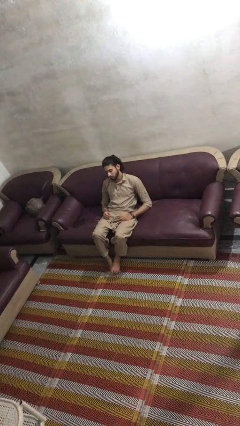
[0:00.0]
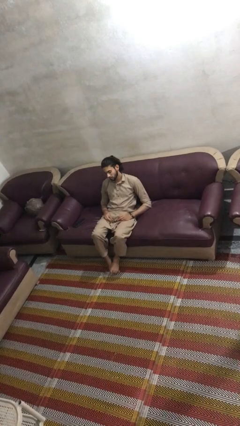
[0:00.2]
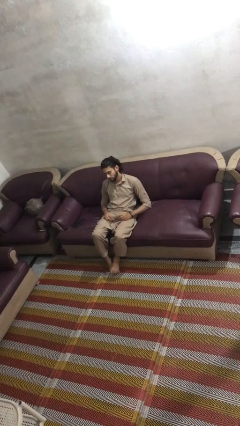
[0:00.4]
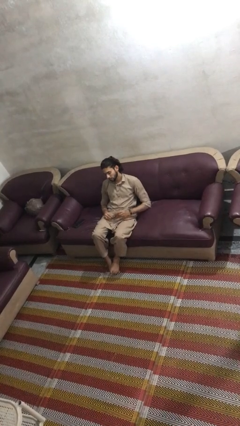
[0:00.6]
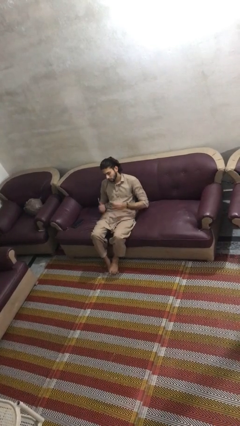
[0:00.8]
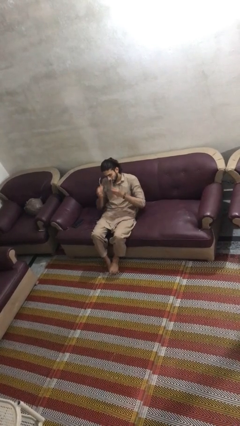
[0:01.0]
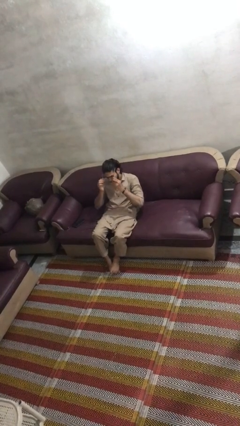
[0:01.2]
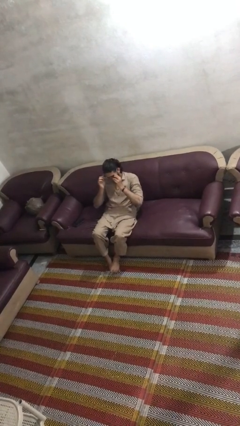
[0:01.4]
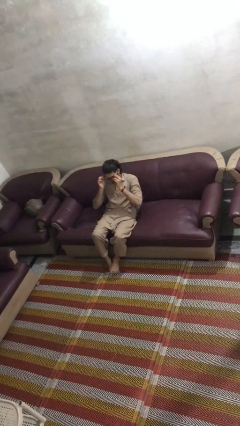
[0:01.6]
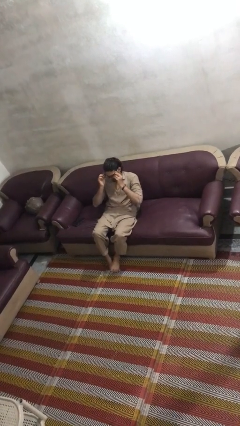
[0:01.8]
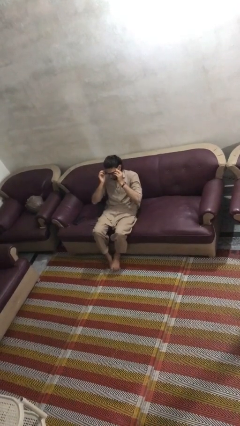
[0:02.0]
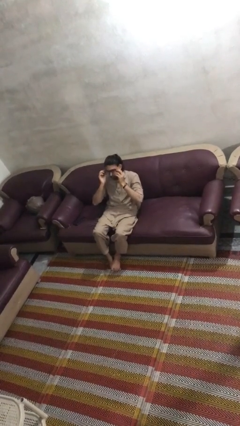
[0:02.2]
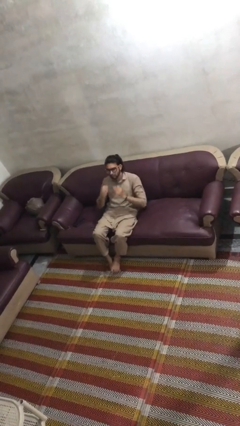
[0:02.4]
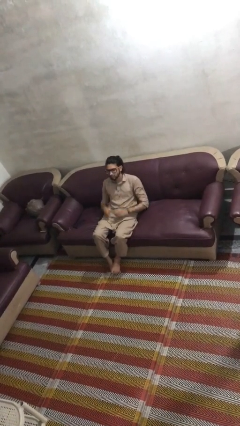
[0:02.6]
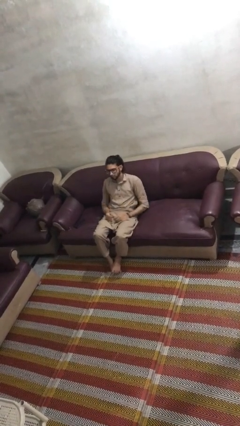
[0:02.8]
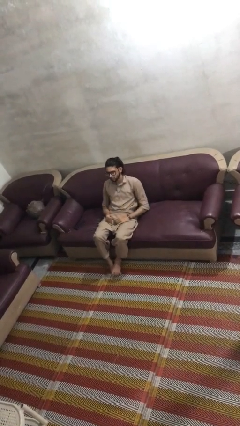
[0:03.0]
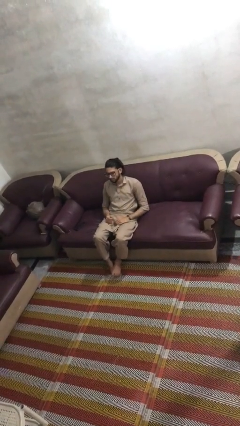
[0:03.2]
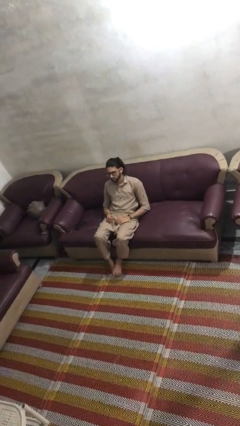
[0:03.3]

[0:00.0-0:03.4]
person puts on glasses

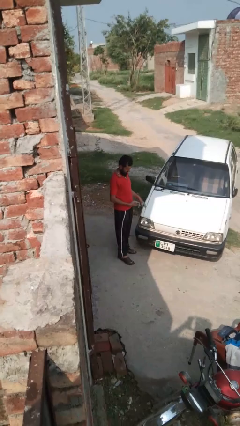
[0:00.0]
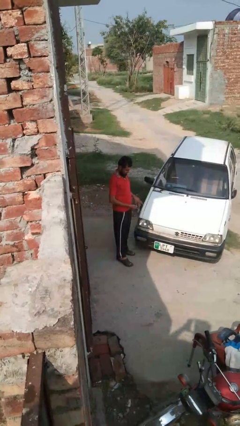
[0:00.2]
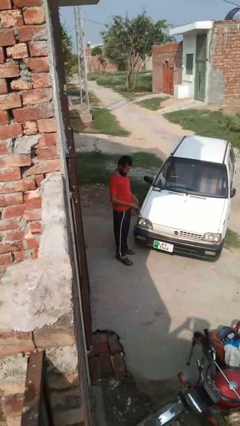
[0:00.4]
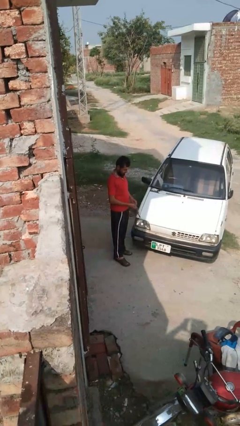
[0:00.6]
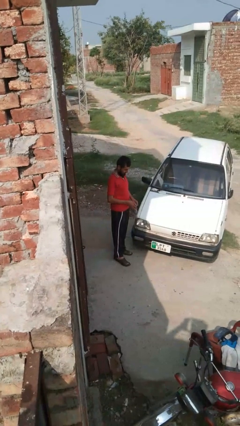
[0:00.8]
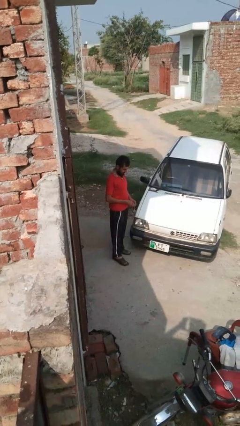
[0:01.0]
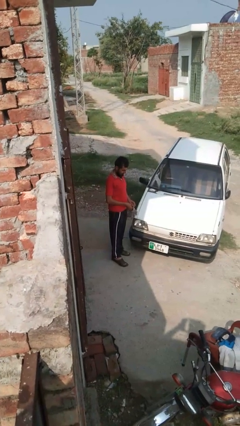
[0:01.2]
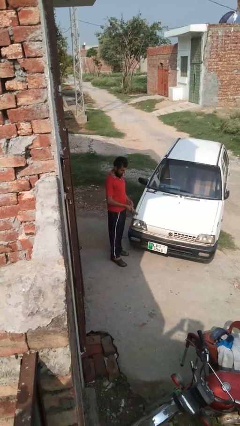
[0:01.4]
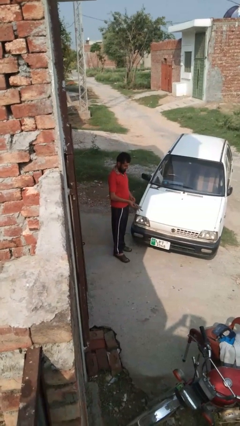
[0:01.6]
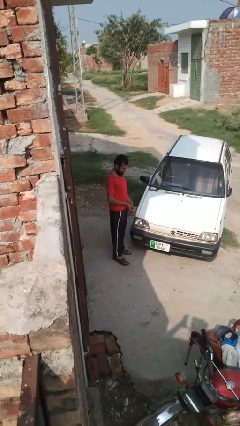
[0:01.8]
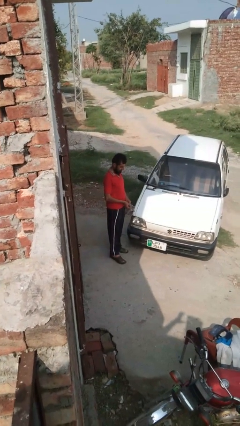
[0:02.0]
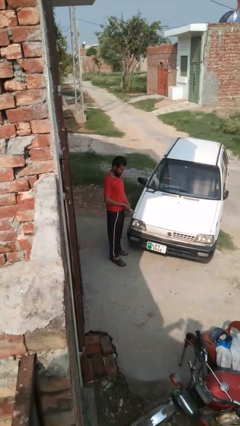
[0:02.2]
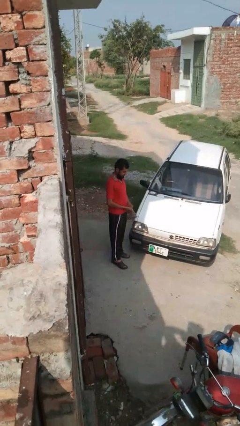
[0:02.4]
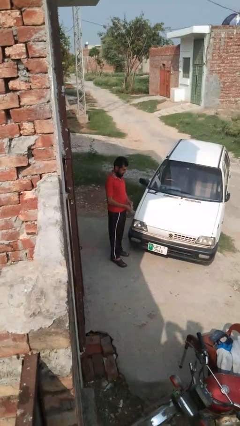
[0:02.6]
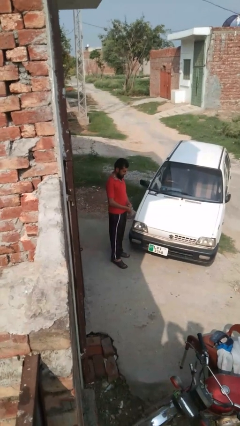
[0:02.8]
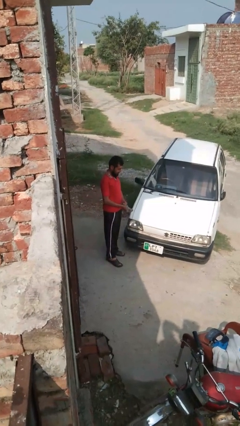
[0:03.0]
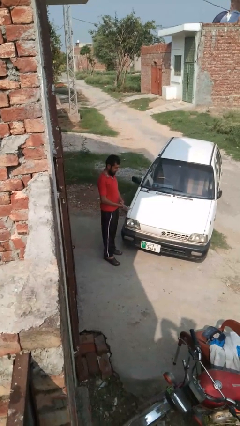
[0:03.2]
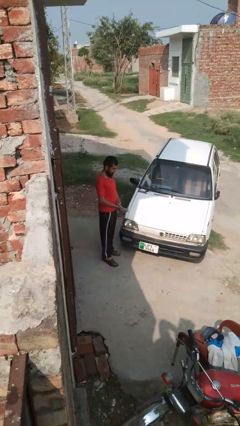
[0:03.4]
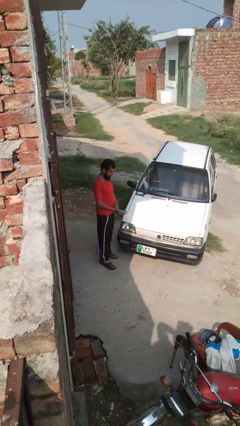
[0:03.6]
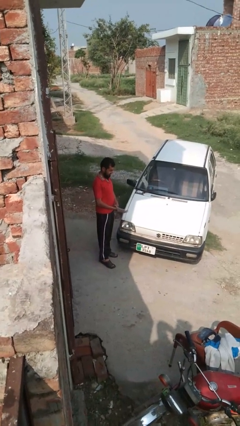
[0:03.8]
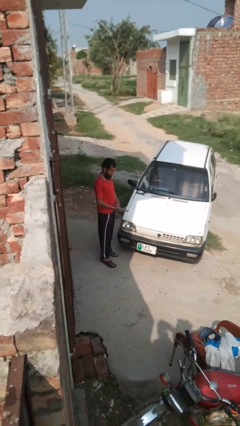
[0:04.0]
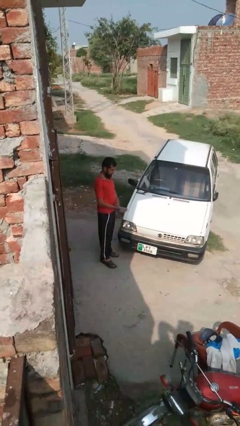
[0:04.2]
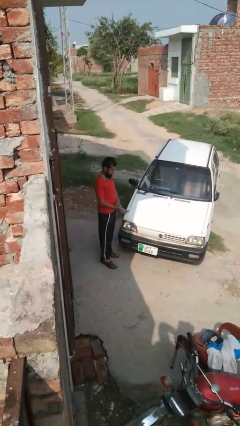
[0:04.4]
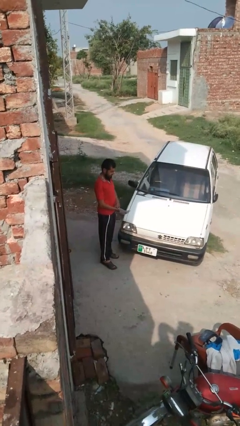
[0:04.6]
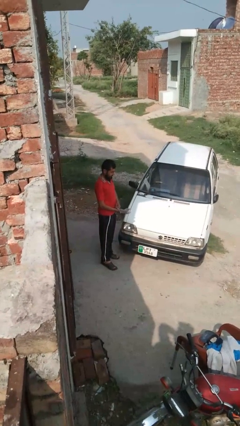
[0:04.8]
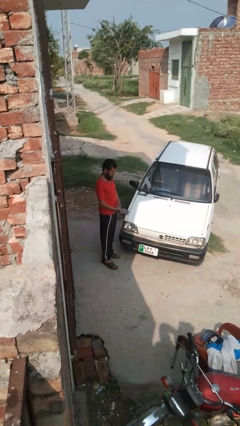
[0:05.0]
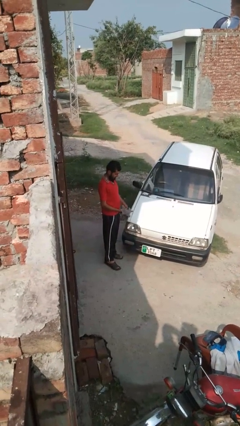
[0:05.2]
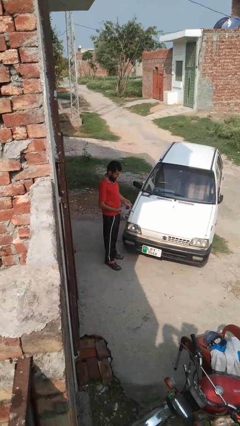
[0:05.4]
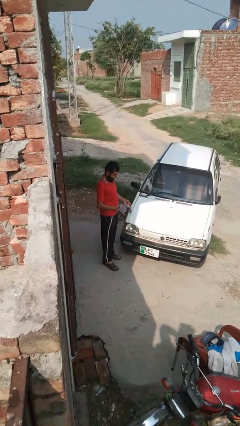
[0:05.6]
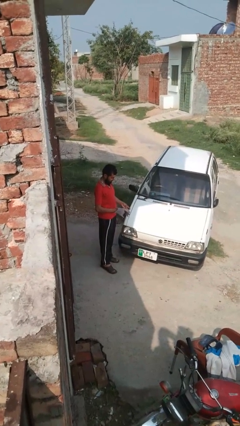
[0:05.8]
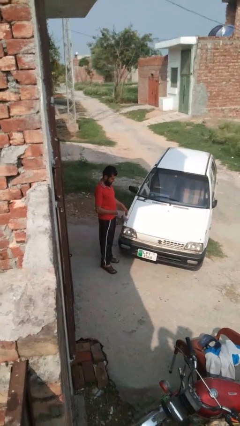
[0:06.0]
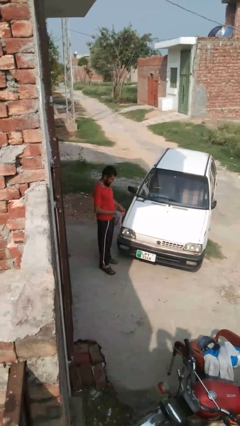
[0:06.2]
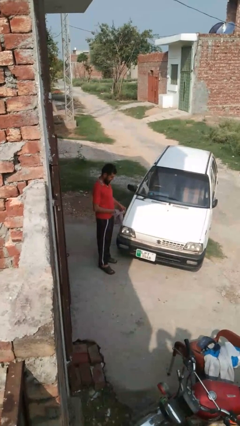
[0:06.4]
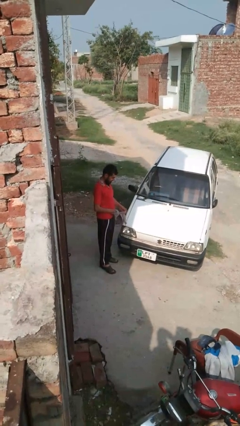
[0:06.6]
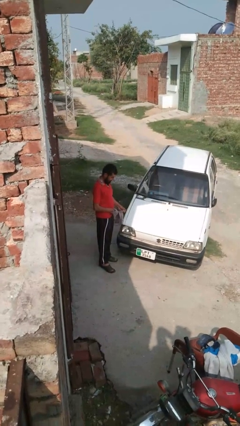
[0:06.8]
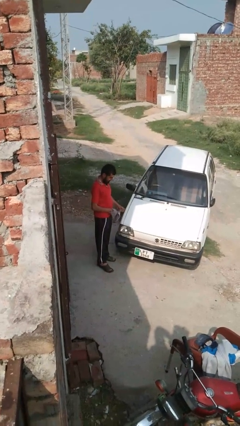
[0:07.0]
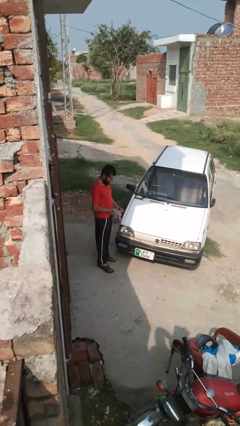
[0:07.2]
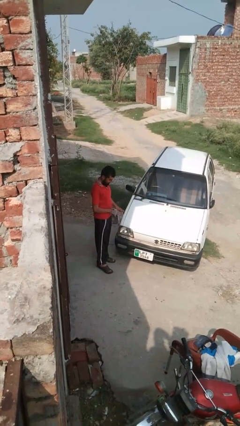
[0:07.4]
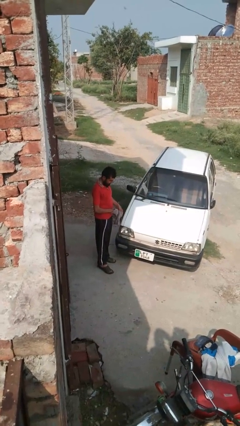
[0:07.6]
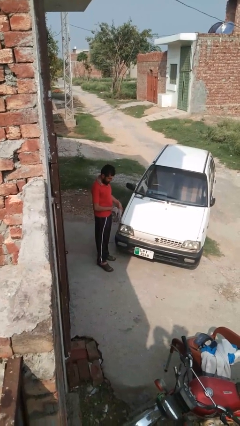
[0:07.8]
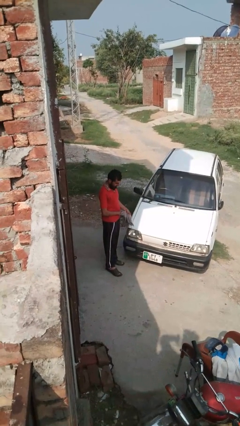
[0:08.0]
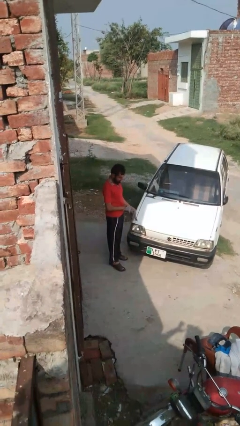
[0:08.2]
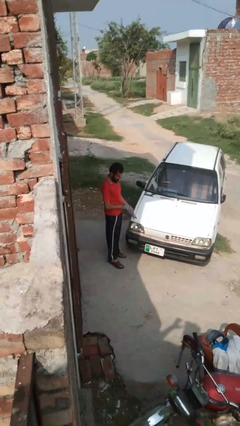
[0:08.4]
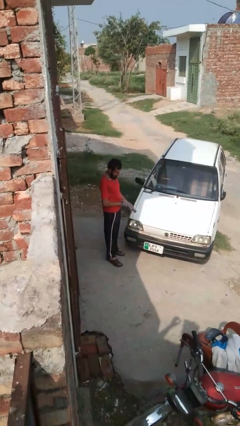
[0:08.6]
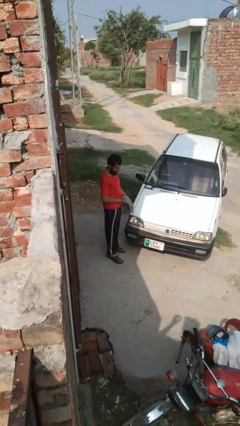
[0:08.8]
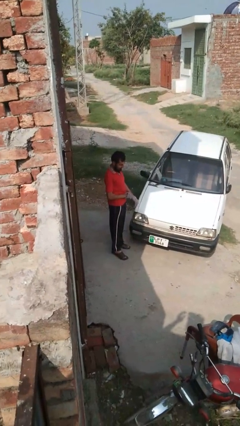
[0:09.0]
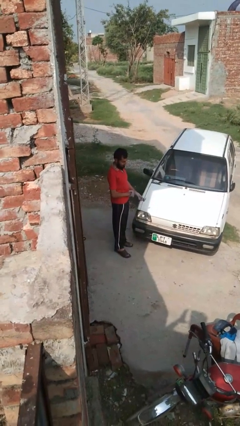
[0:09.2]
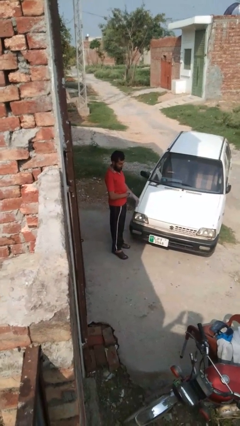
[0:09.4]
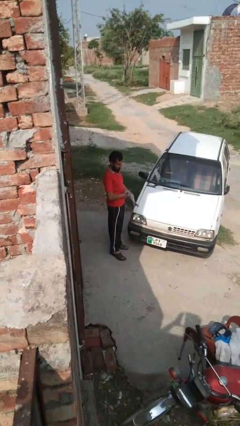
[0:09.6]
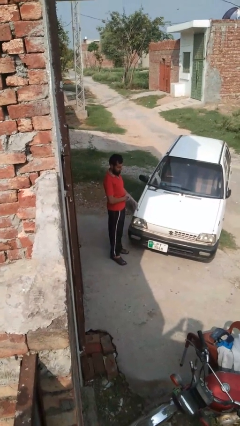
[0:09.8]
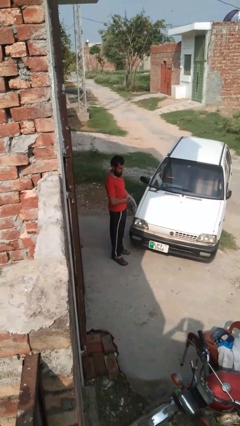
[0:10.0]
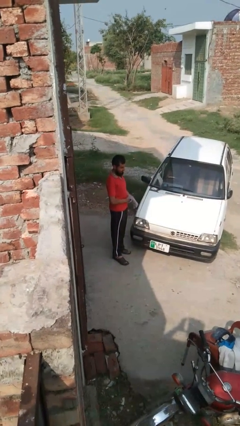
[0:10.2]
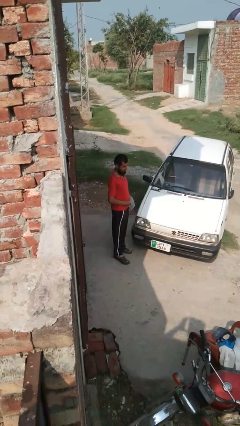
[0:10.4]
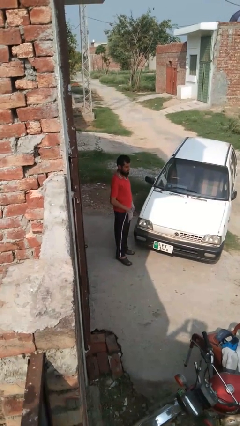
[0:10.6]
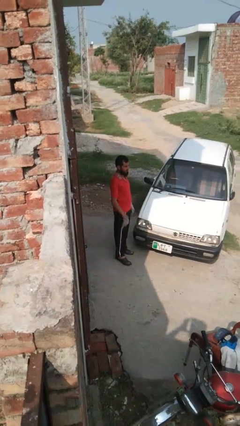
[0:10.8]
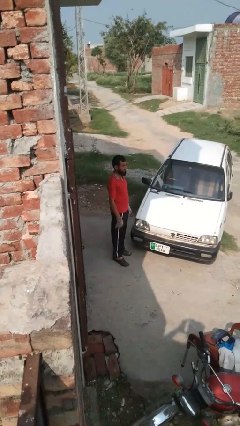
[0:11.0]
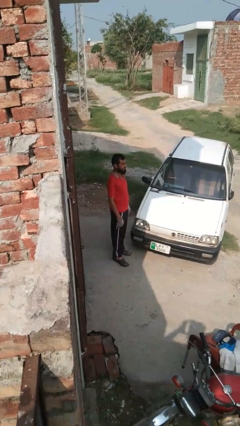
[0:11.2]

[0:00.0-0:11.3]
person puts on gloves

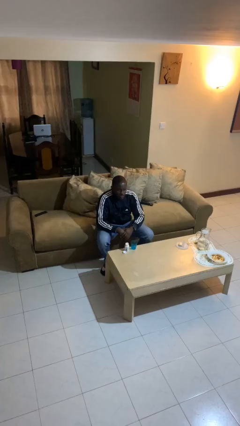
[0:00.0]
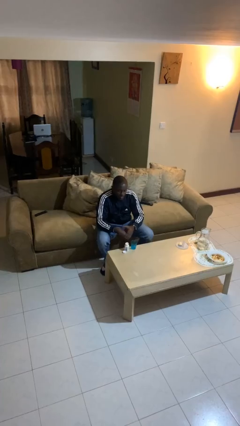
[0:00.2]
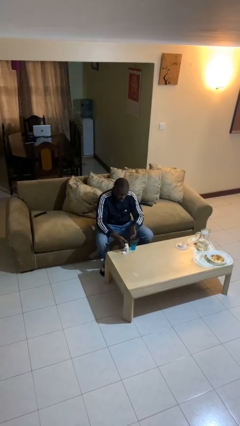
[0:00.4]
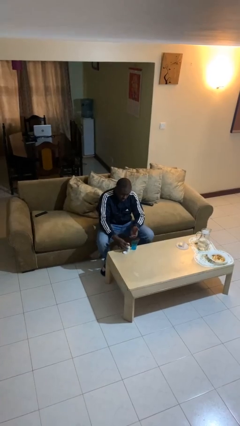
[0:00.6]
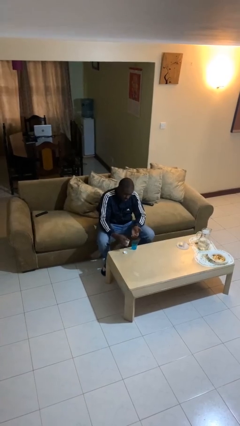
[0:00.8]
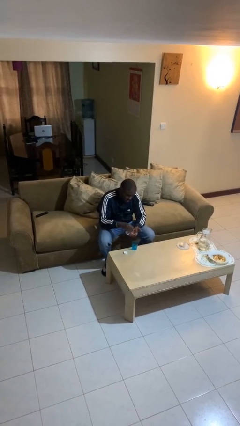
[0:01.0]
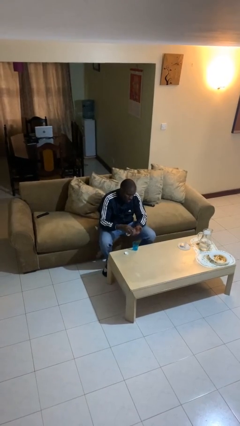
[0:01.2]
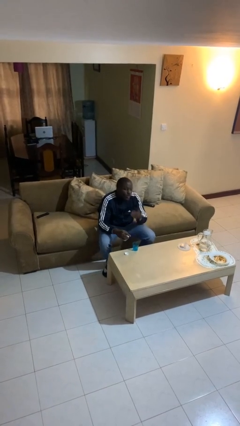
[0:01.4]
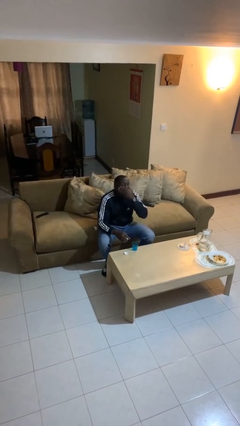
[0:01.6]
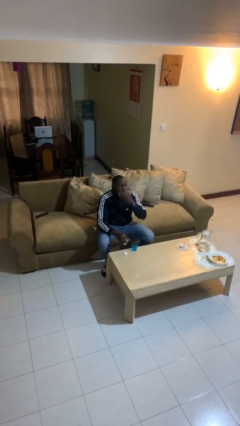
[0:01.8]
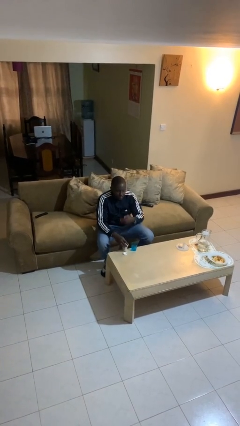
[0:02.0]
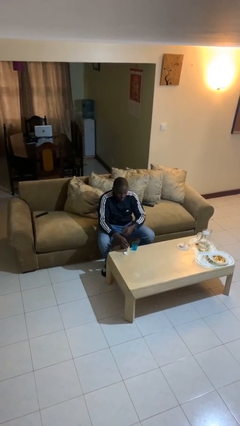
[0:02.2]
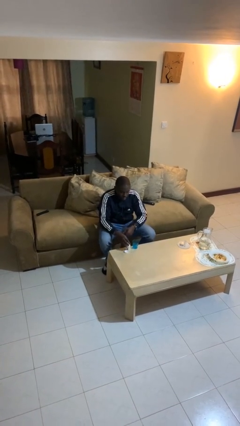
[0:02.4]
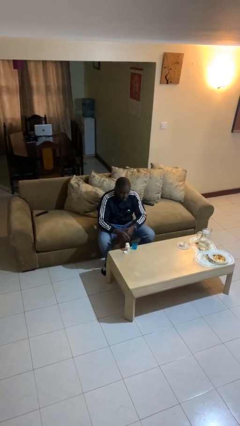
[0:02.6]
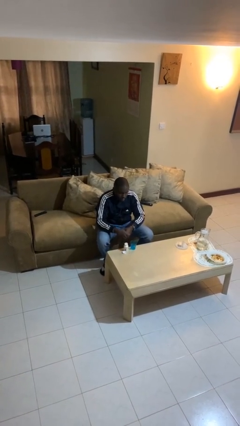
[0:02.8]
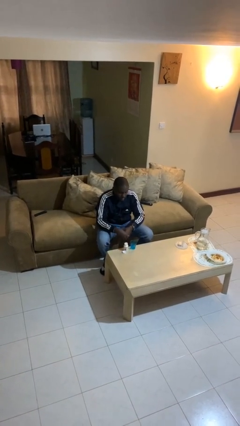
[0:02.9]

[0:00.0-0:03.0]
person takes medicine pills

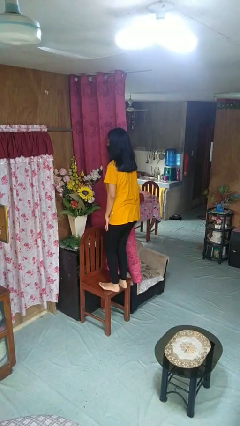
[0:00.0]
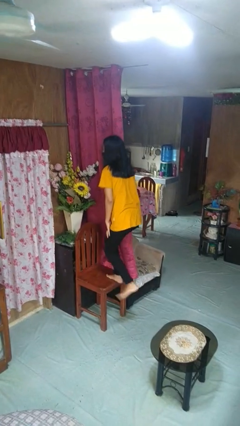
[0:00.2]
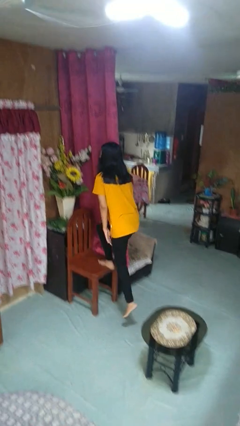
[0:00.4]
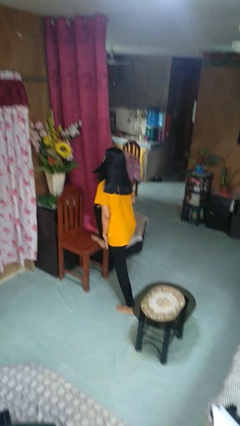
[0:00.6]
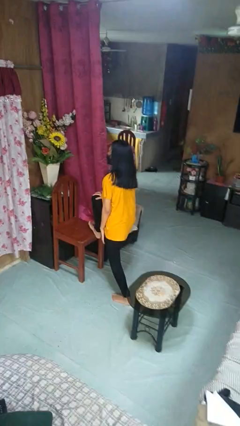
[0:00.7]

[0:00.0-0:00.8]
person climbs off chair
